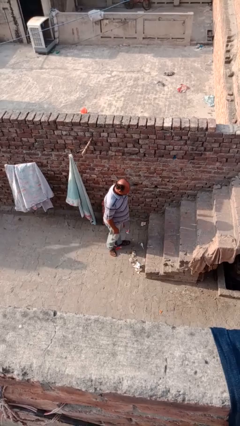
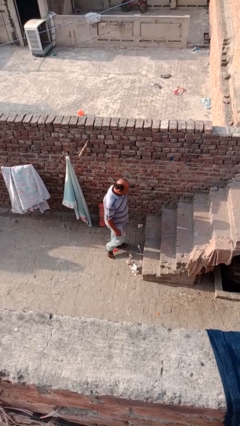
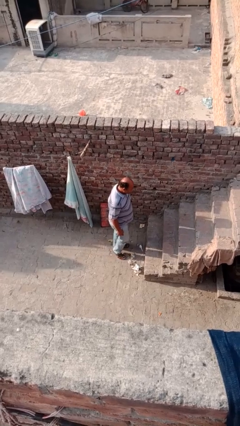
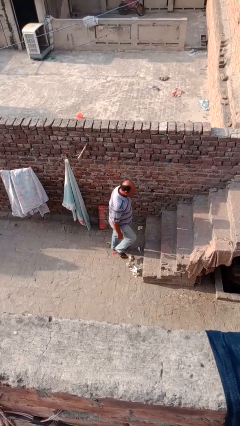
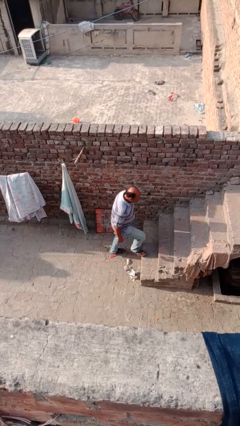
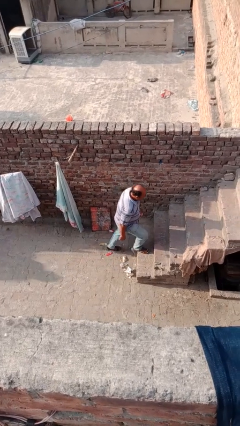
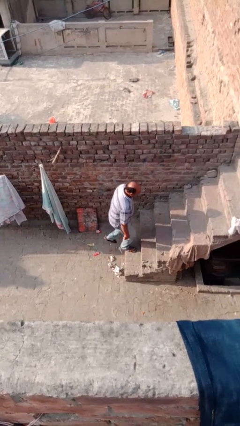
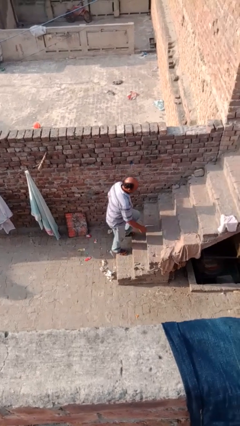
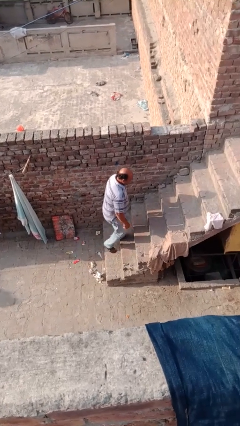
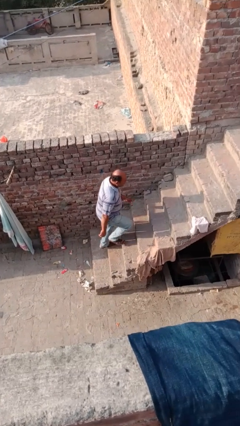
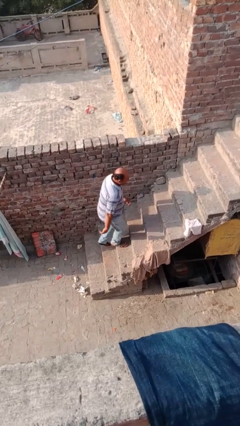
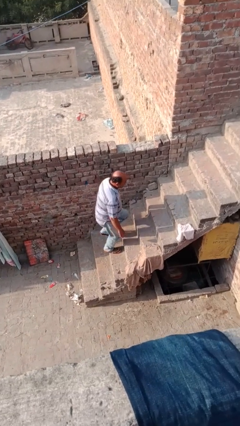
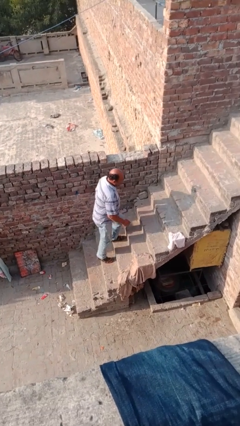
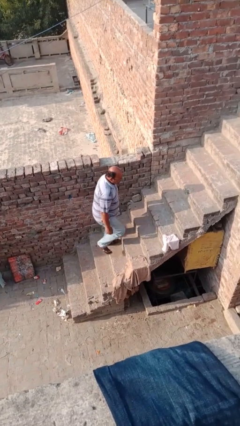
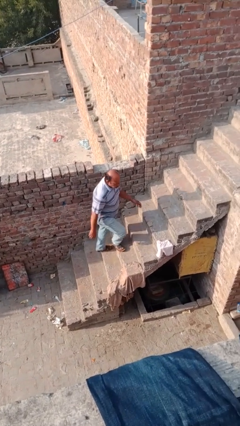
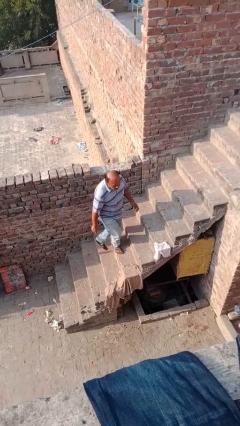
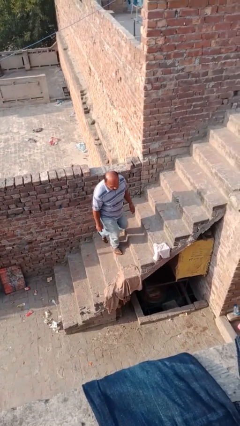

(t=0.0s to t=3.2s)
person climbs up stairs

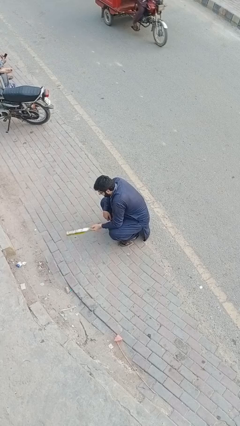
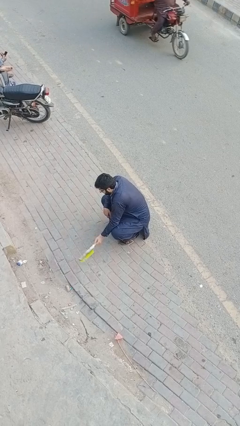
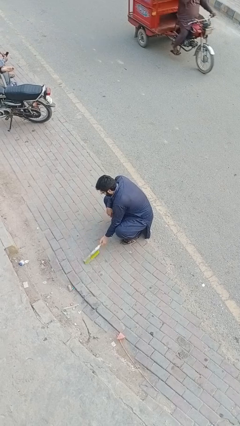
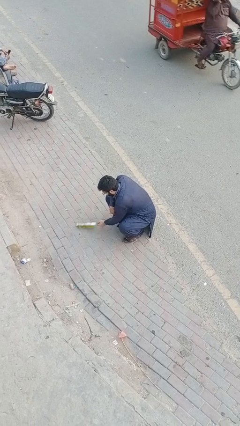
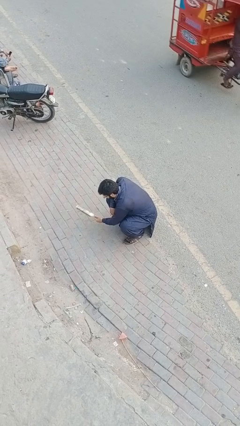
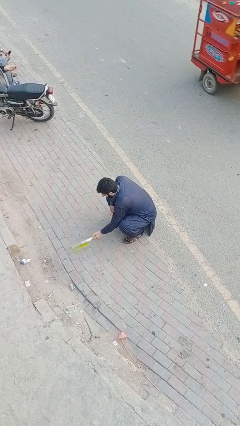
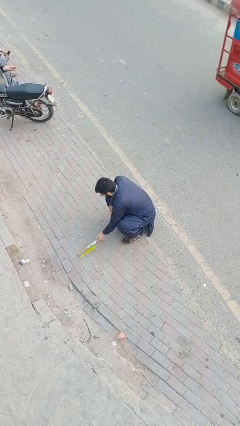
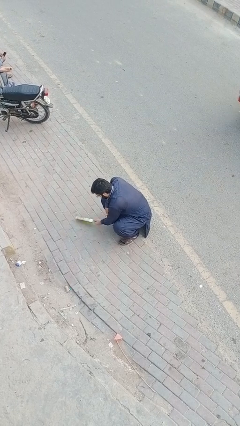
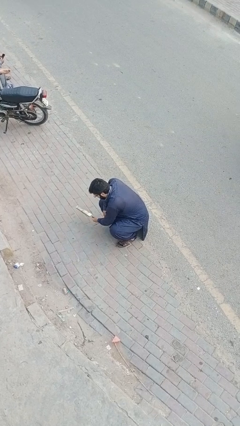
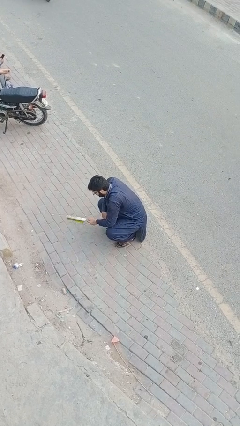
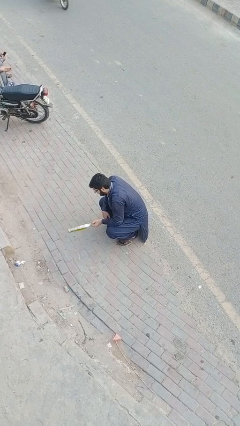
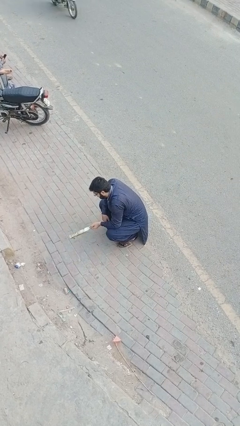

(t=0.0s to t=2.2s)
person sweeps floor

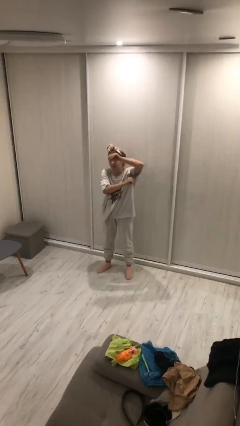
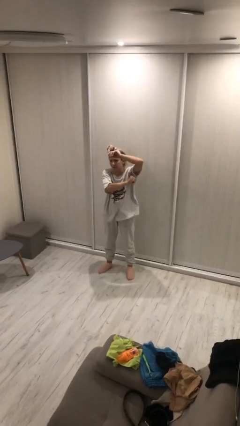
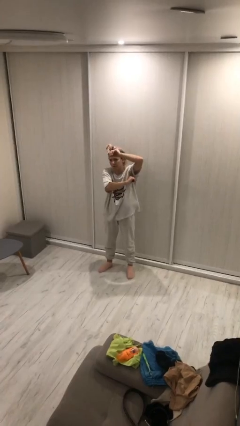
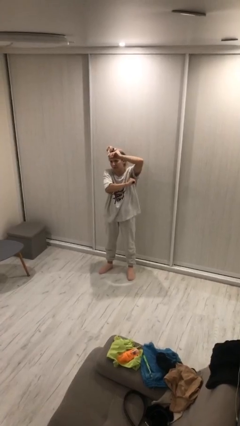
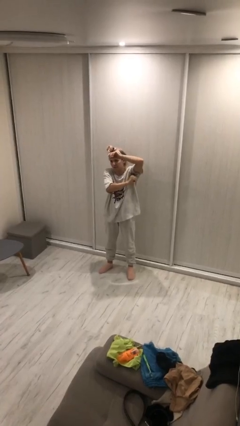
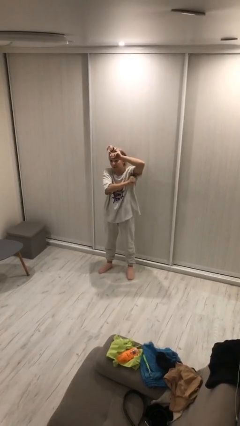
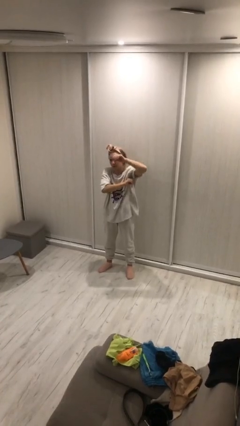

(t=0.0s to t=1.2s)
person applies deodorant

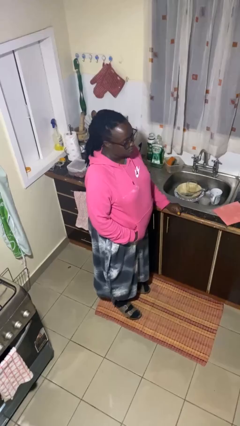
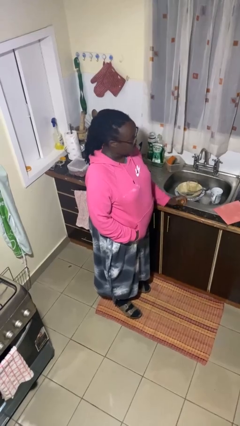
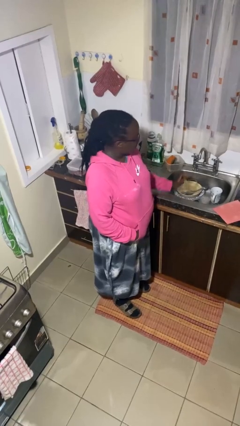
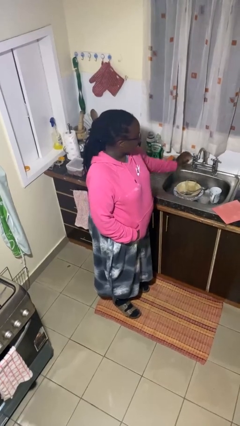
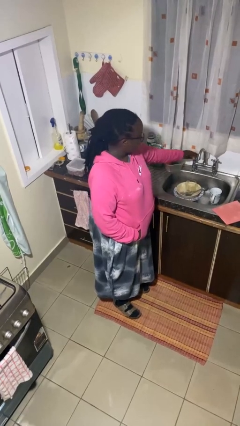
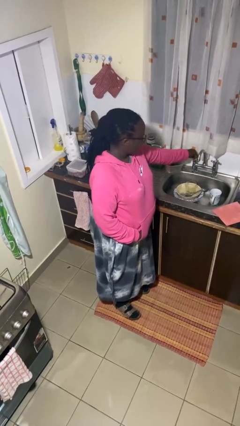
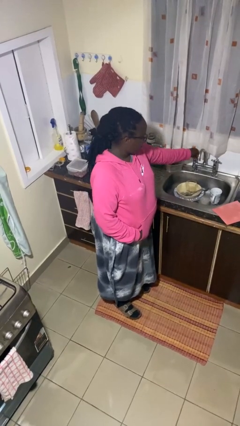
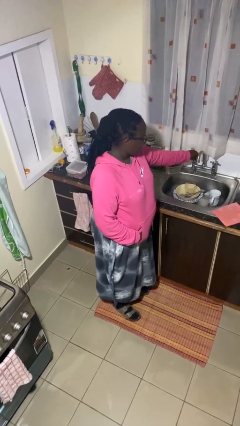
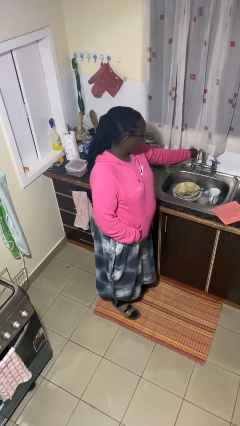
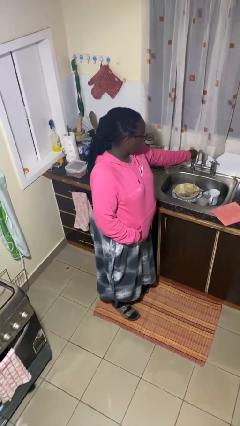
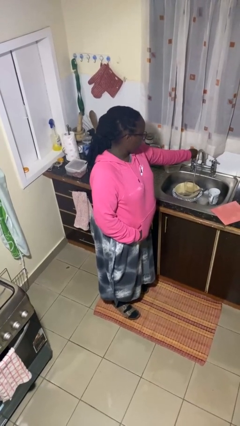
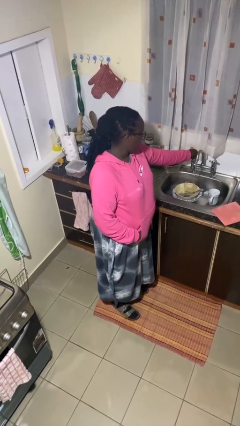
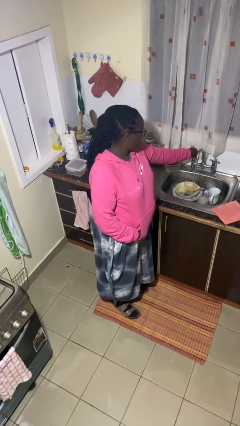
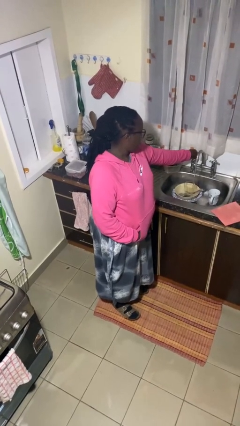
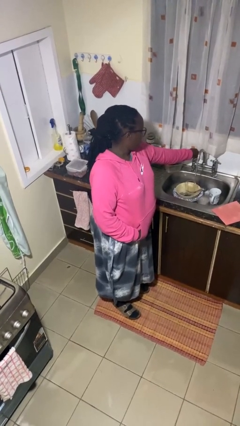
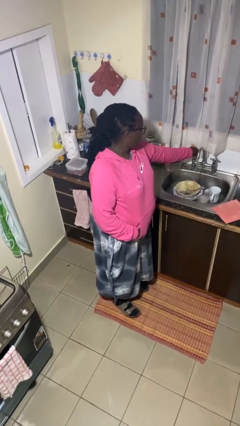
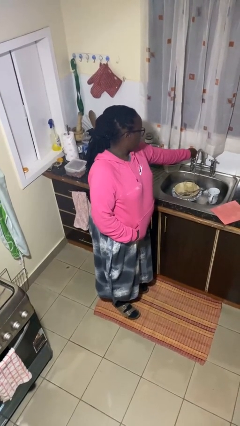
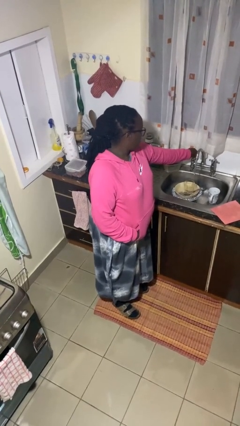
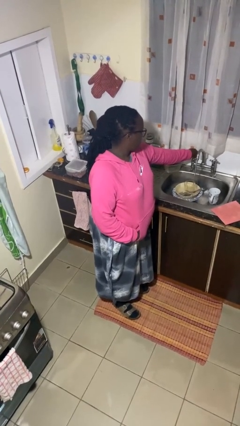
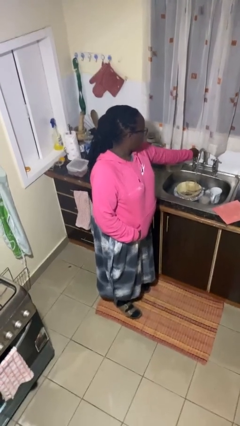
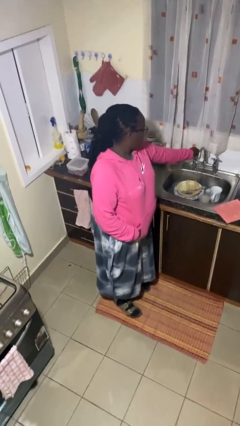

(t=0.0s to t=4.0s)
person turns on faucet

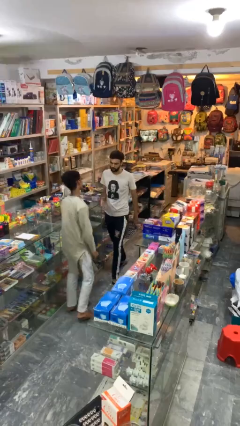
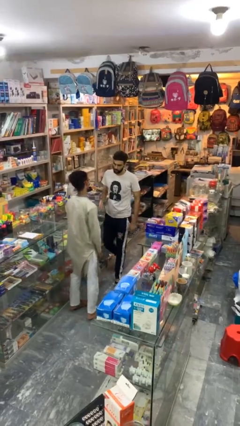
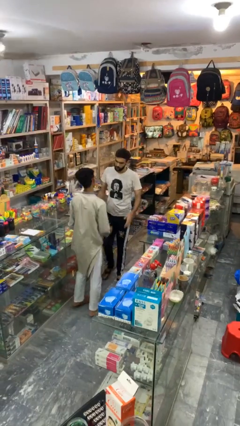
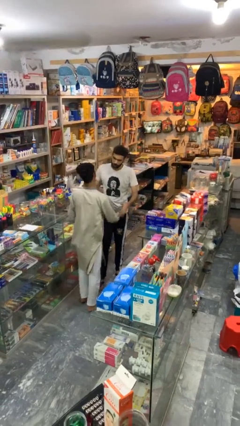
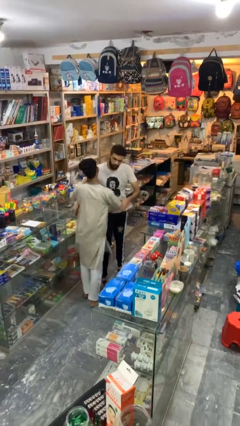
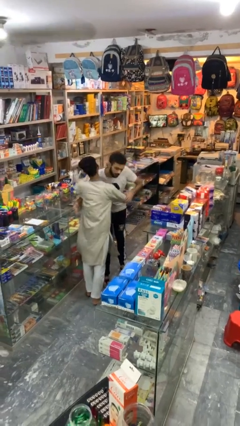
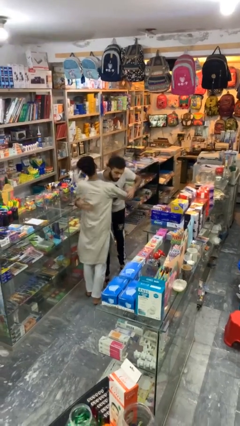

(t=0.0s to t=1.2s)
person embraces person

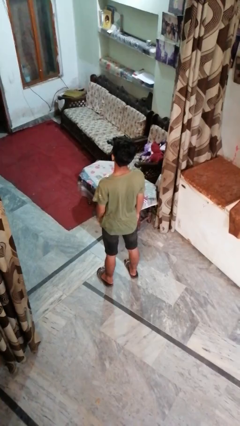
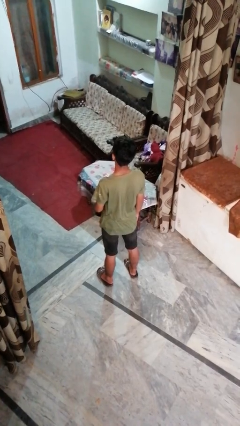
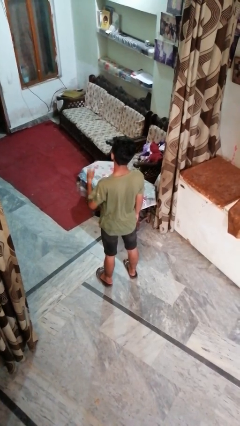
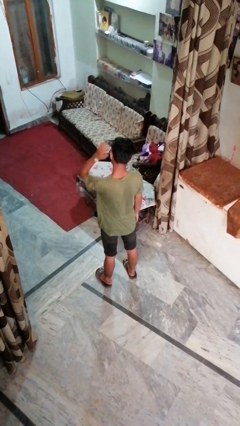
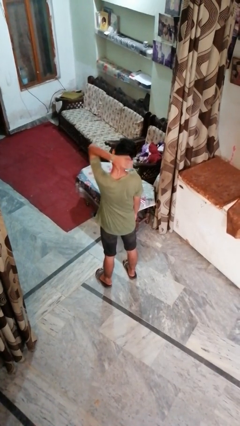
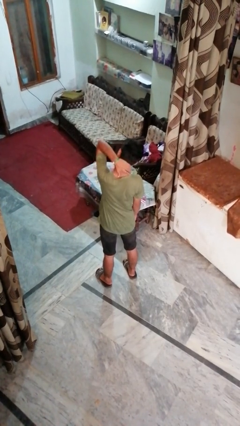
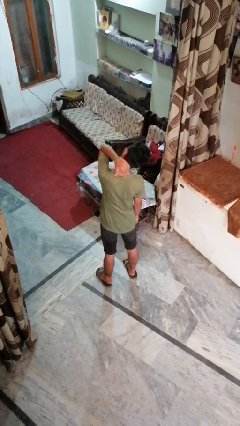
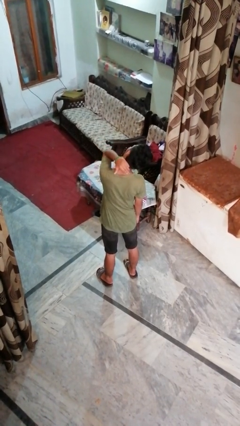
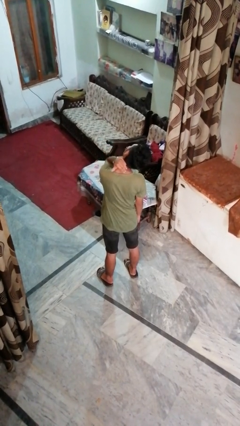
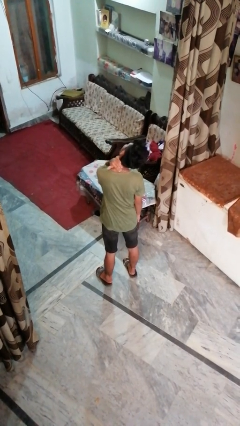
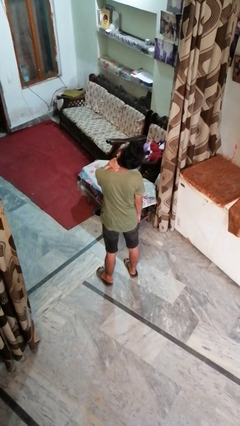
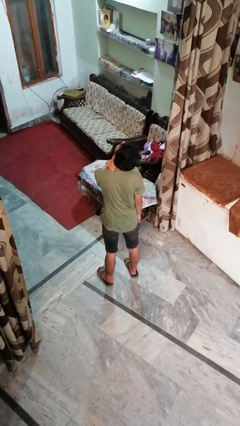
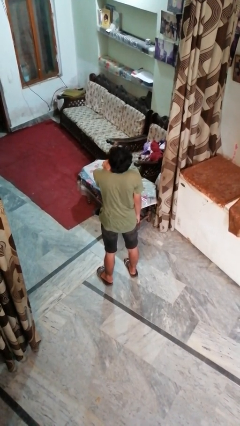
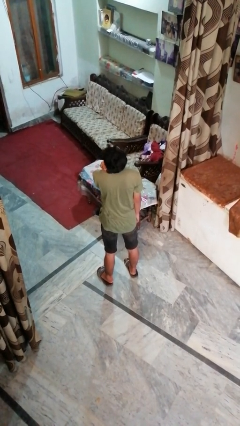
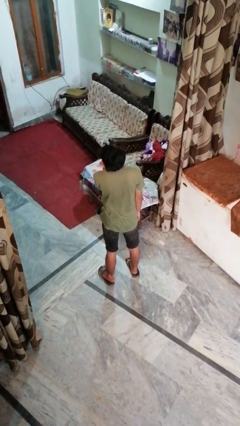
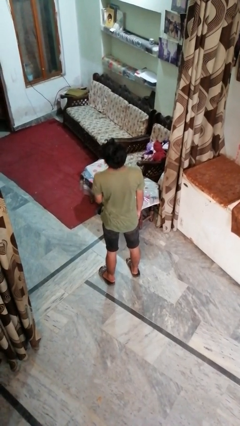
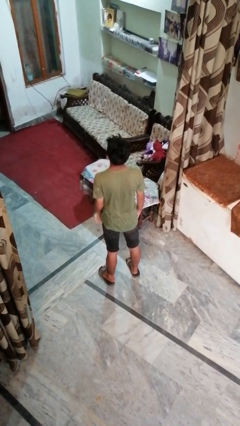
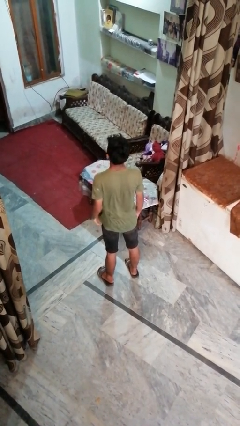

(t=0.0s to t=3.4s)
person rubs neck

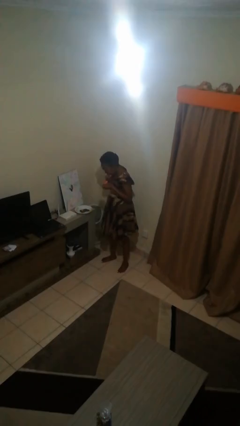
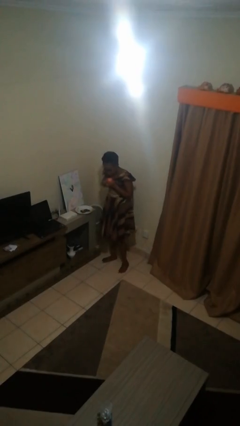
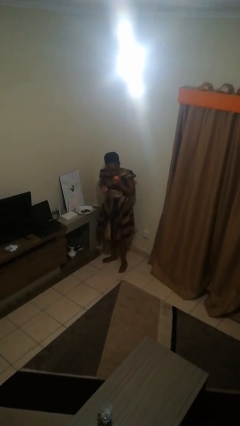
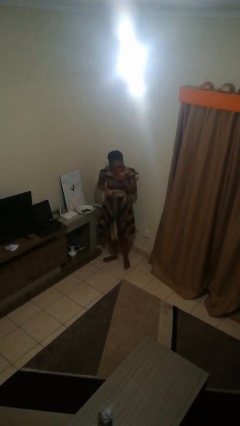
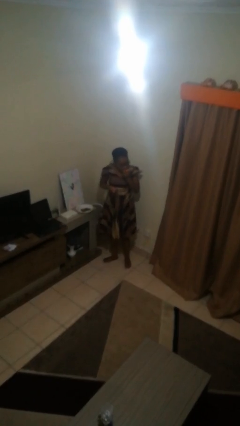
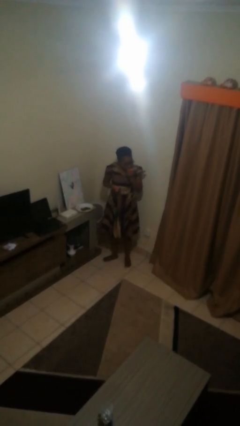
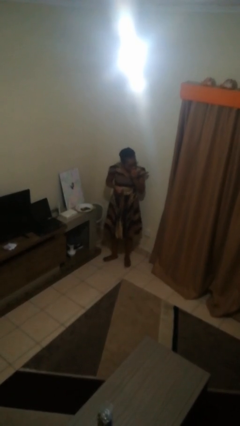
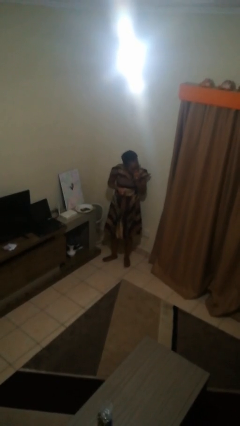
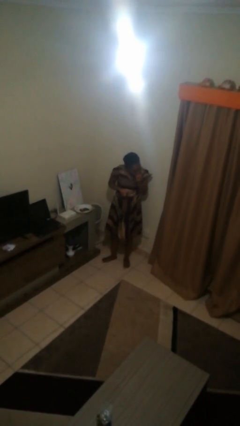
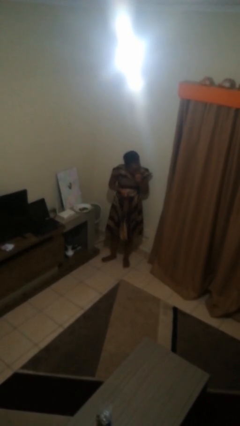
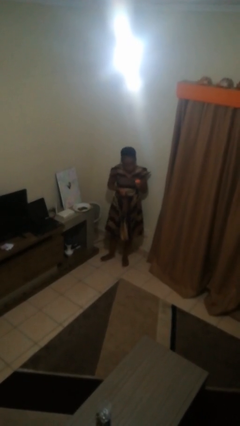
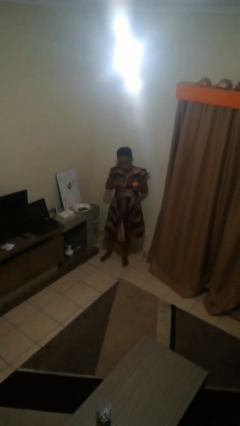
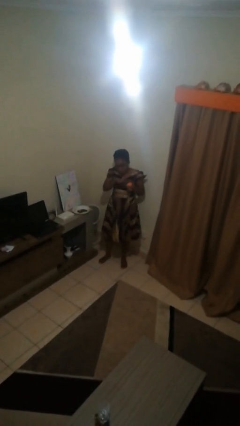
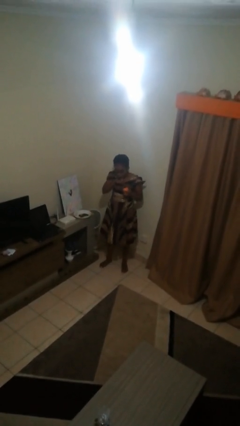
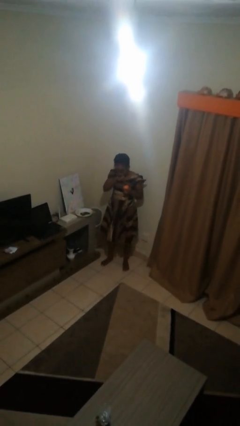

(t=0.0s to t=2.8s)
person eats apple
